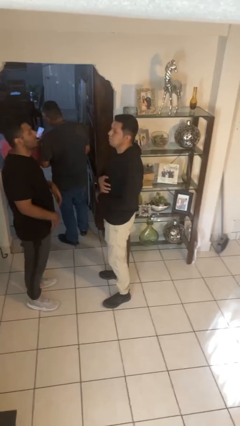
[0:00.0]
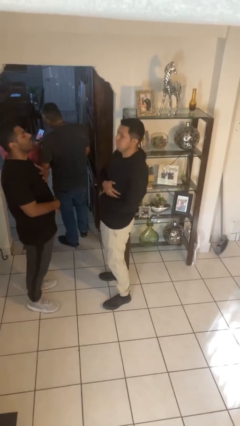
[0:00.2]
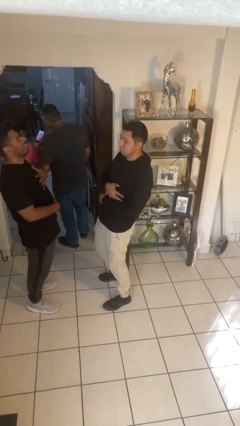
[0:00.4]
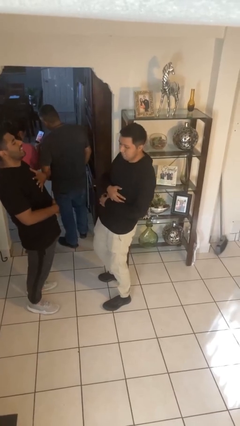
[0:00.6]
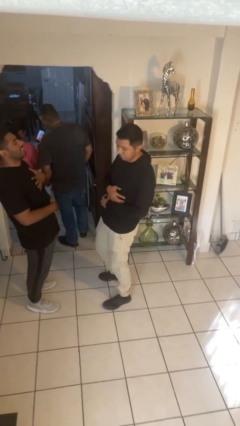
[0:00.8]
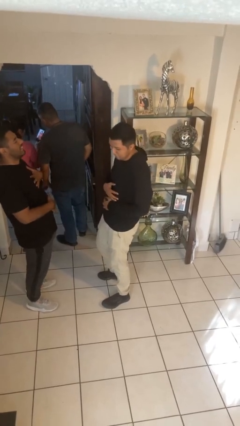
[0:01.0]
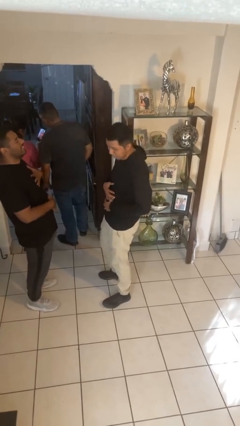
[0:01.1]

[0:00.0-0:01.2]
person laughs with person

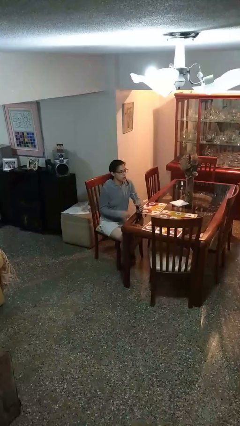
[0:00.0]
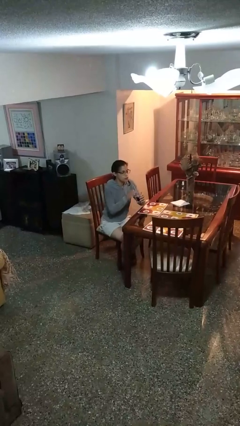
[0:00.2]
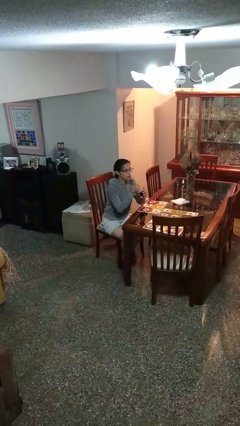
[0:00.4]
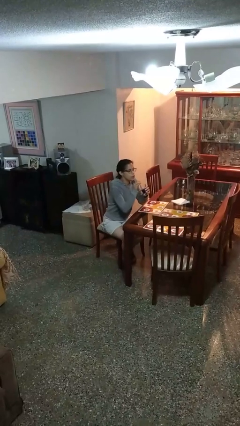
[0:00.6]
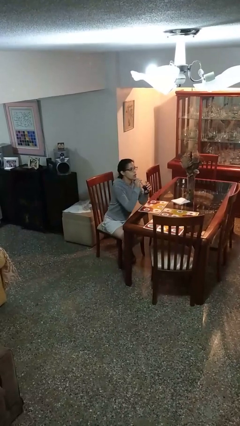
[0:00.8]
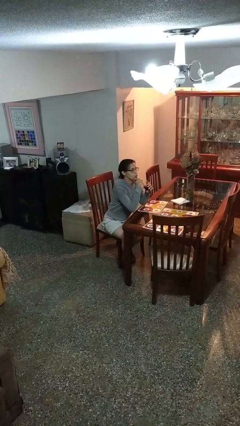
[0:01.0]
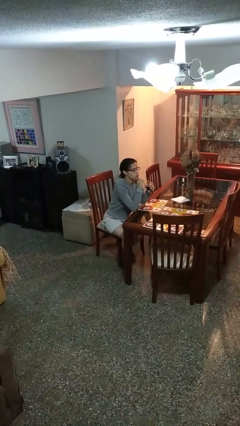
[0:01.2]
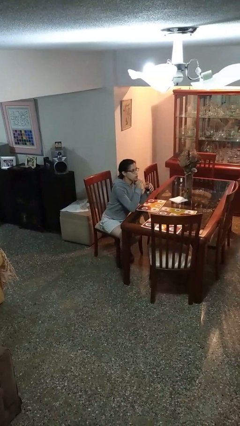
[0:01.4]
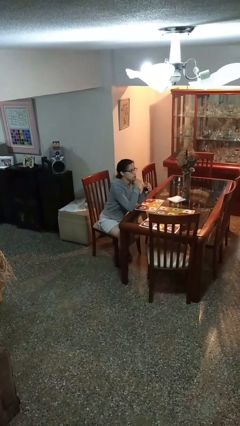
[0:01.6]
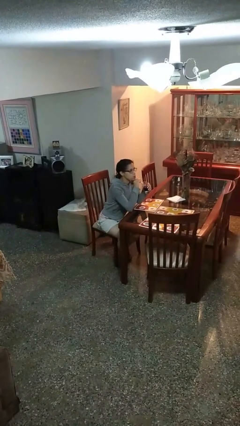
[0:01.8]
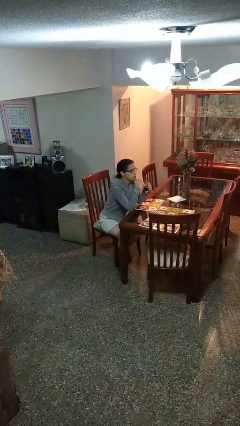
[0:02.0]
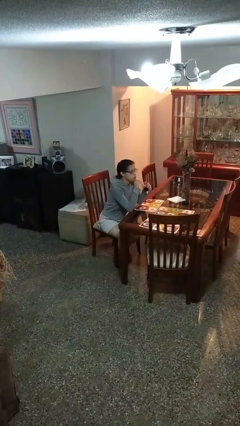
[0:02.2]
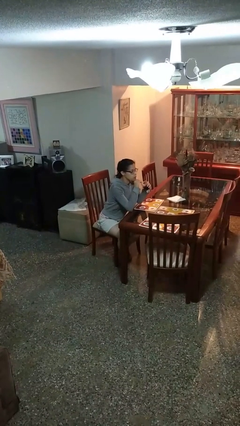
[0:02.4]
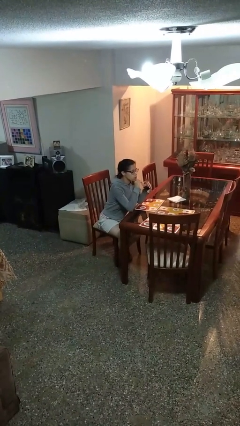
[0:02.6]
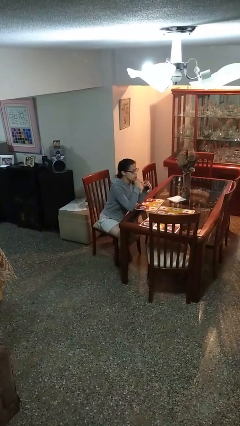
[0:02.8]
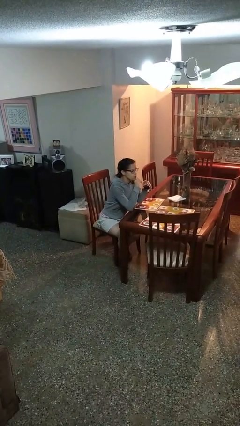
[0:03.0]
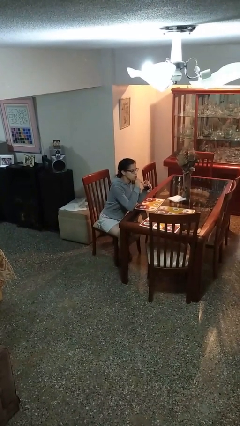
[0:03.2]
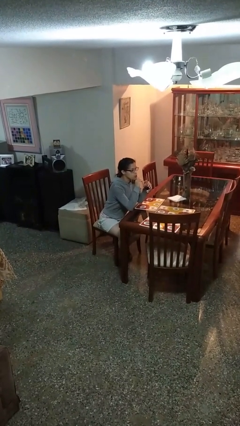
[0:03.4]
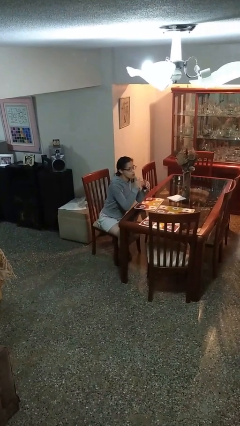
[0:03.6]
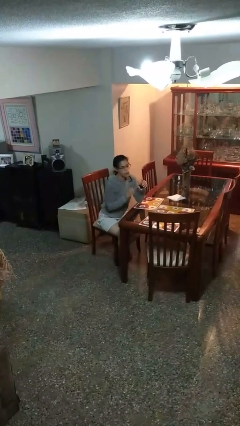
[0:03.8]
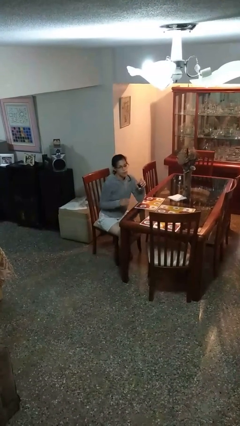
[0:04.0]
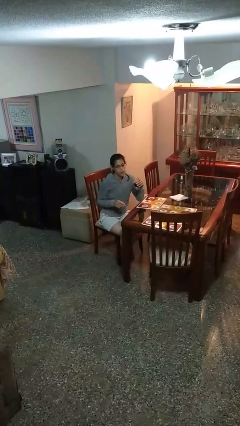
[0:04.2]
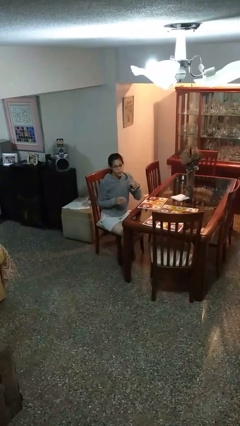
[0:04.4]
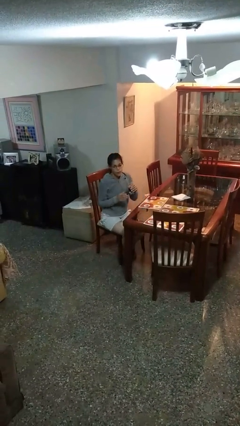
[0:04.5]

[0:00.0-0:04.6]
person drinks from straw

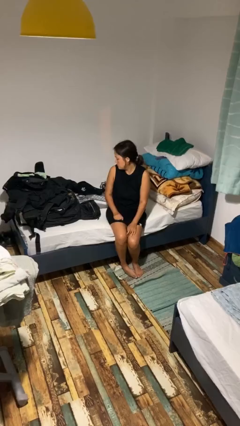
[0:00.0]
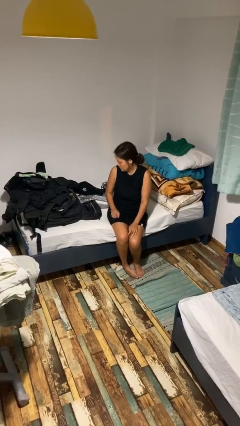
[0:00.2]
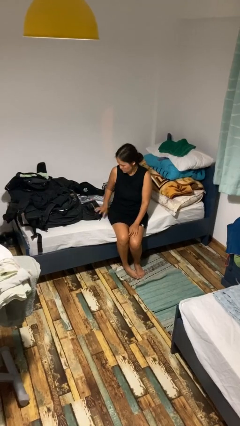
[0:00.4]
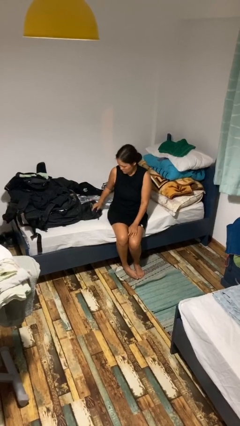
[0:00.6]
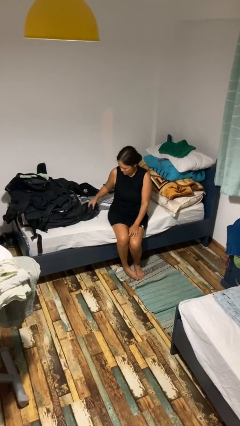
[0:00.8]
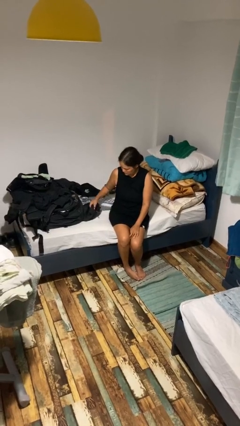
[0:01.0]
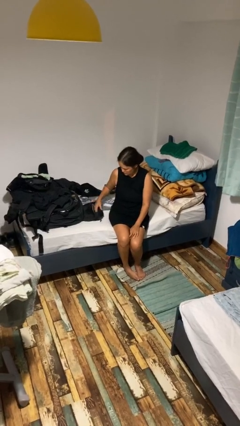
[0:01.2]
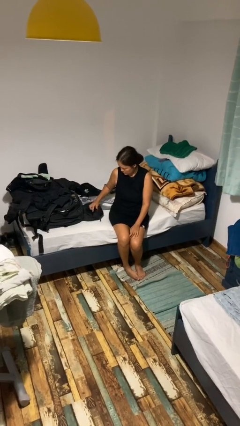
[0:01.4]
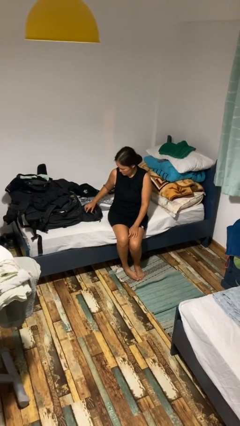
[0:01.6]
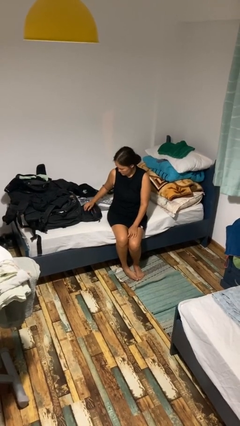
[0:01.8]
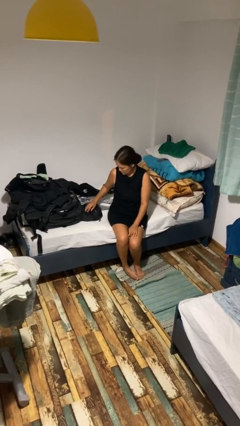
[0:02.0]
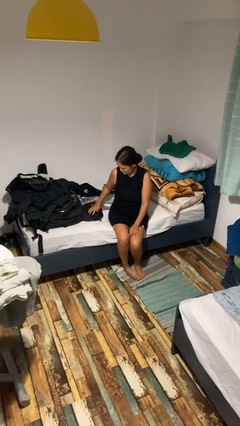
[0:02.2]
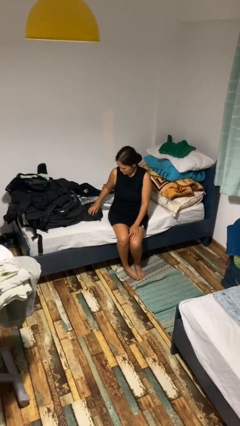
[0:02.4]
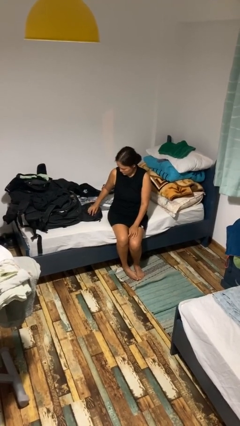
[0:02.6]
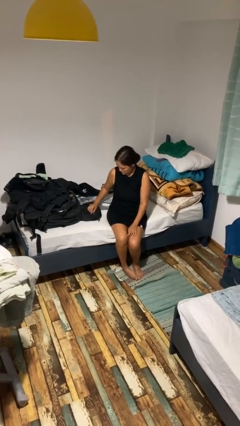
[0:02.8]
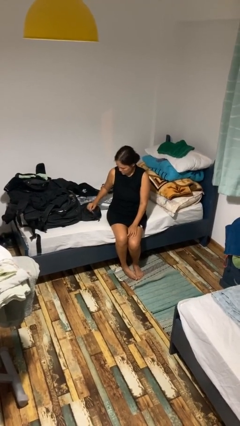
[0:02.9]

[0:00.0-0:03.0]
person taps object with finger

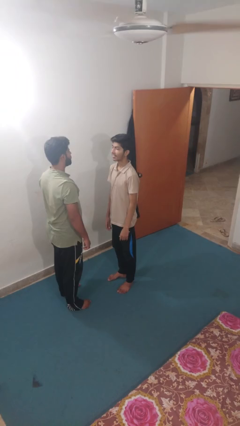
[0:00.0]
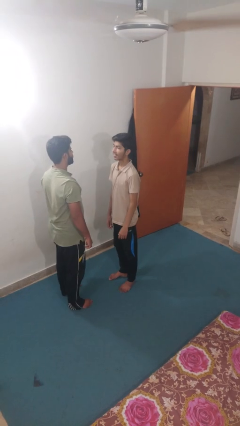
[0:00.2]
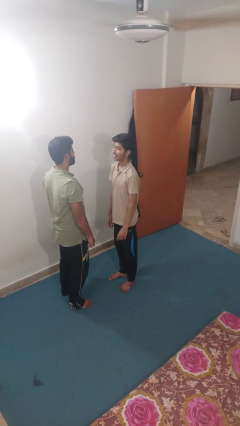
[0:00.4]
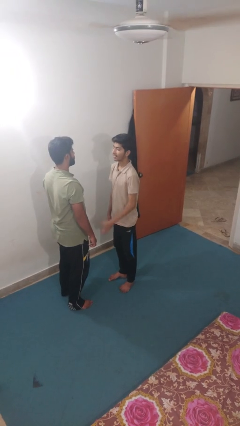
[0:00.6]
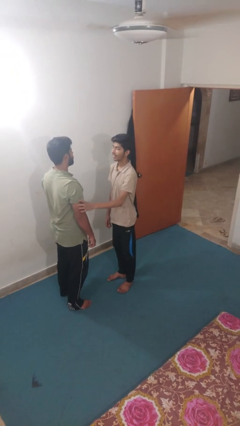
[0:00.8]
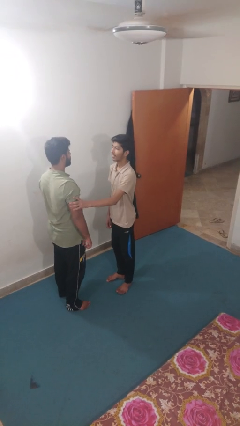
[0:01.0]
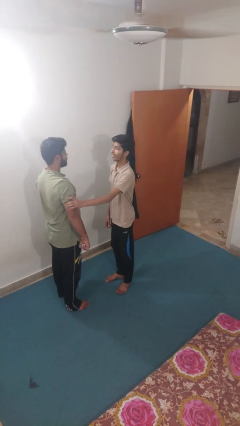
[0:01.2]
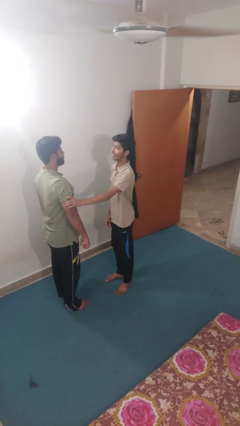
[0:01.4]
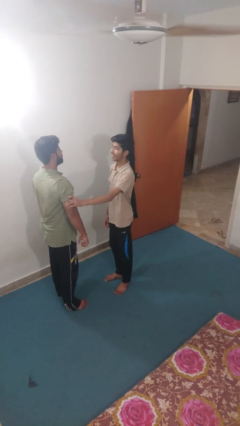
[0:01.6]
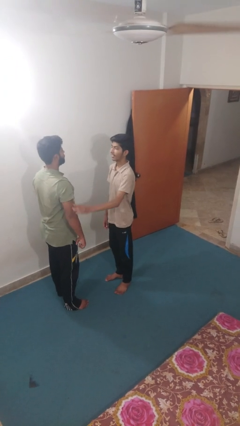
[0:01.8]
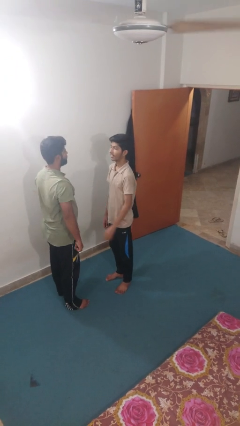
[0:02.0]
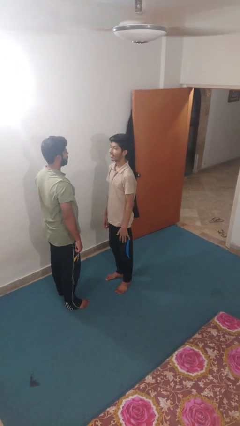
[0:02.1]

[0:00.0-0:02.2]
person grabs person by bicep

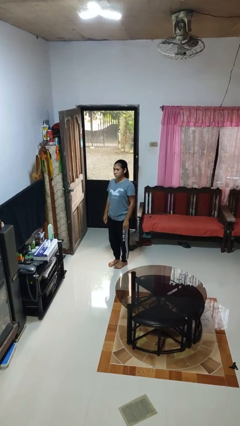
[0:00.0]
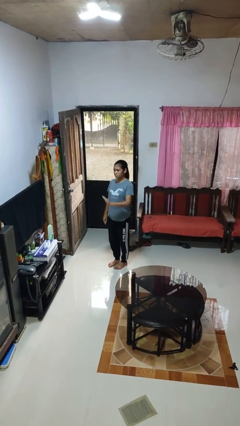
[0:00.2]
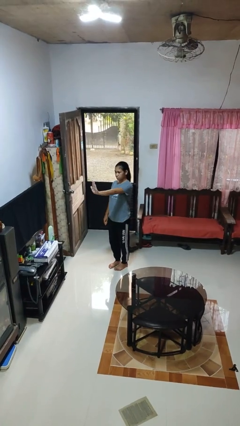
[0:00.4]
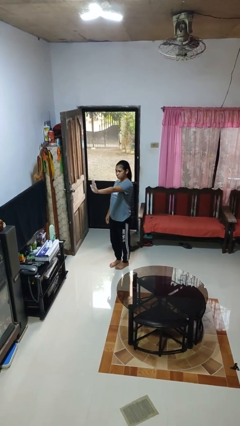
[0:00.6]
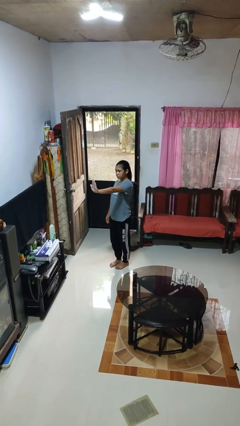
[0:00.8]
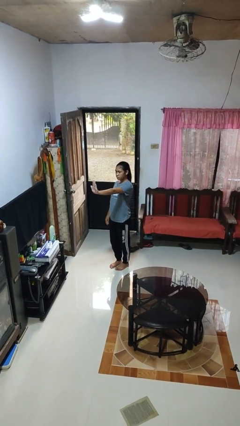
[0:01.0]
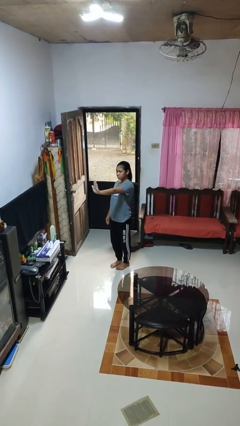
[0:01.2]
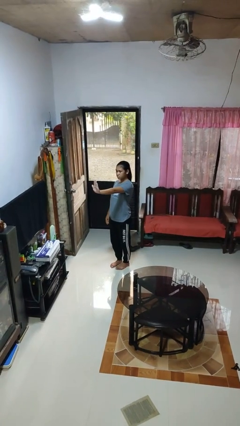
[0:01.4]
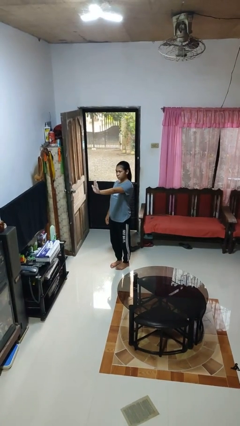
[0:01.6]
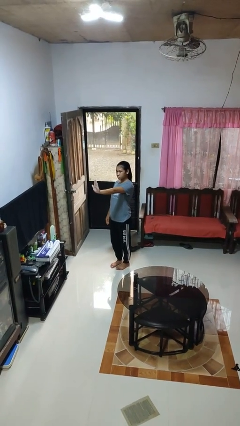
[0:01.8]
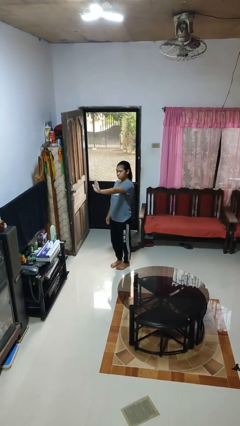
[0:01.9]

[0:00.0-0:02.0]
person gestures stop

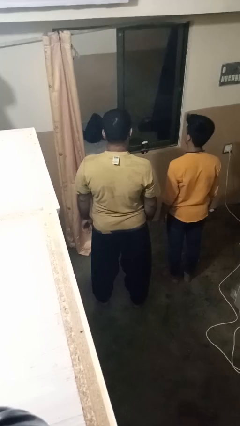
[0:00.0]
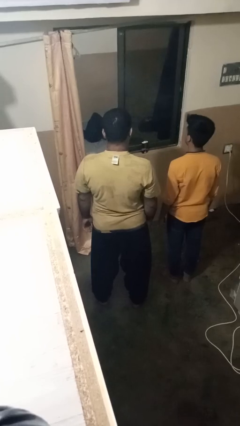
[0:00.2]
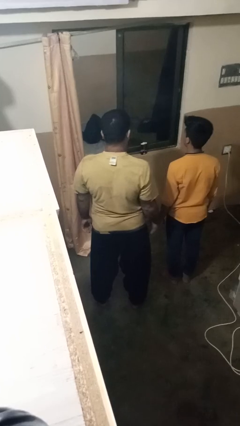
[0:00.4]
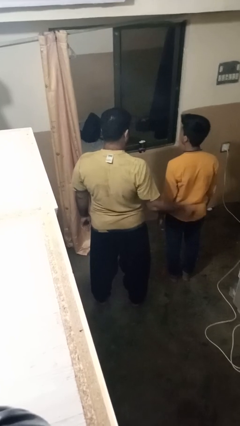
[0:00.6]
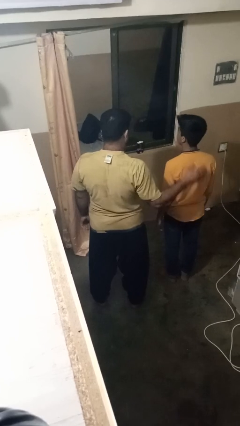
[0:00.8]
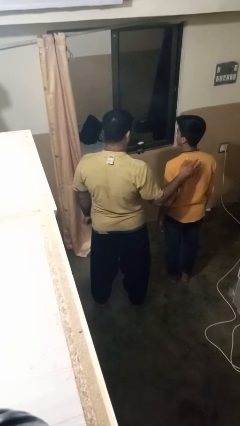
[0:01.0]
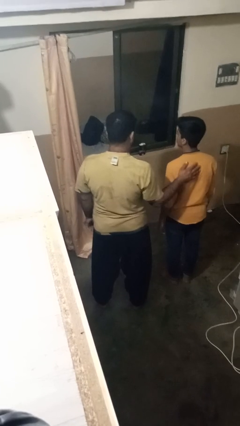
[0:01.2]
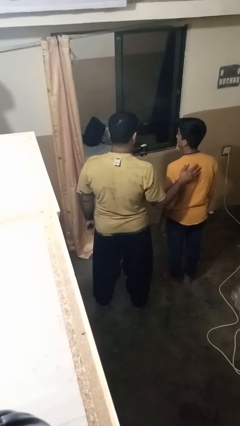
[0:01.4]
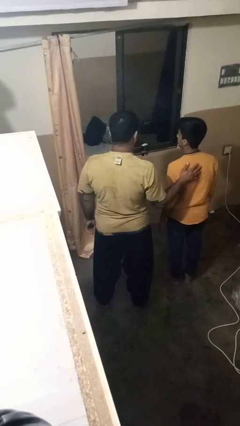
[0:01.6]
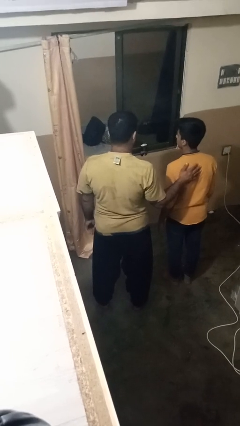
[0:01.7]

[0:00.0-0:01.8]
person touches back of person

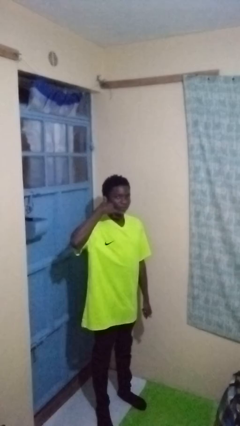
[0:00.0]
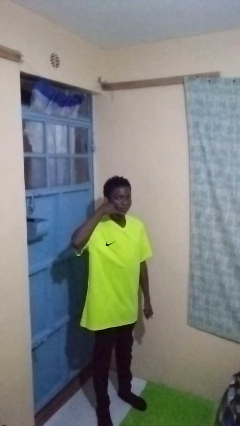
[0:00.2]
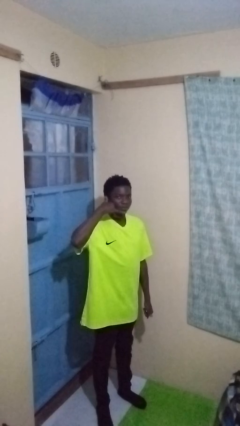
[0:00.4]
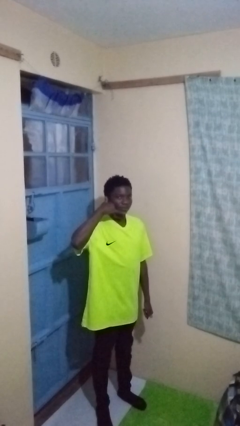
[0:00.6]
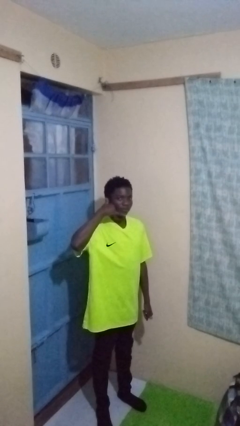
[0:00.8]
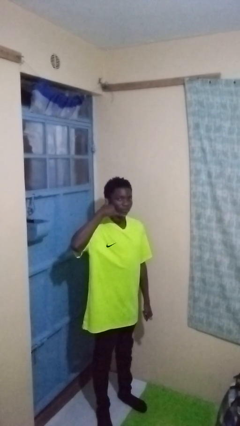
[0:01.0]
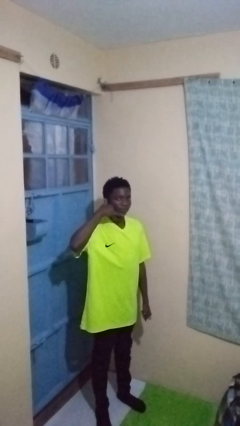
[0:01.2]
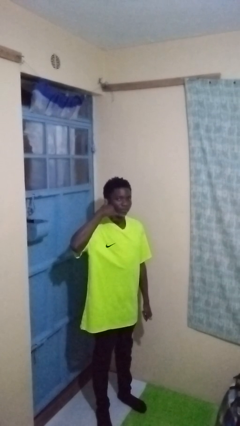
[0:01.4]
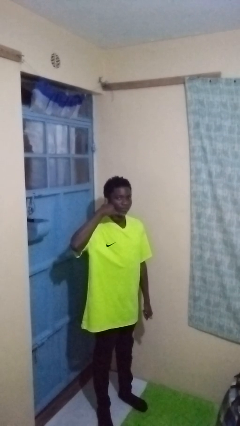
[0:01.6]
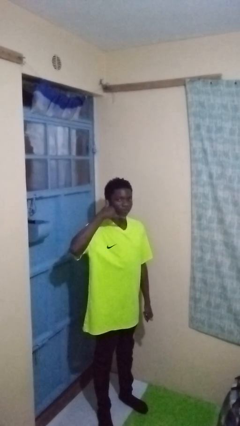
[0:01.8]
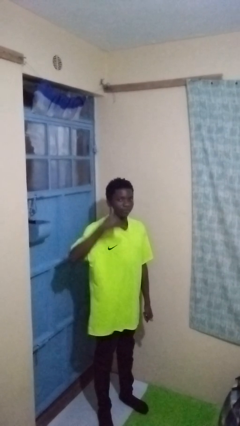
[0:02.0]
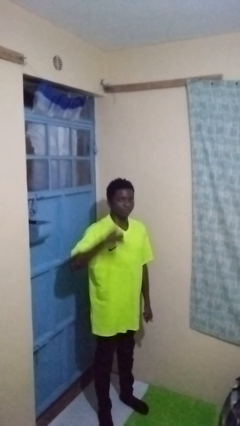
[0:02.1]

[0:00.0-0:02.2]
person gestures call me
